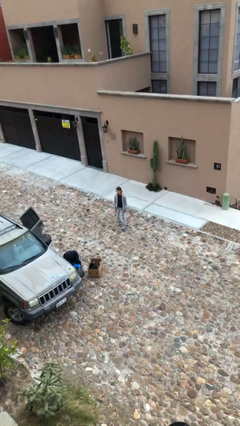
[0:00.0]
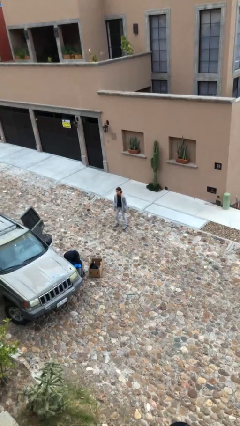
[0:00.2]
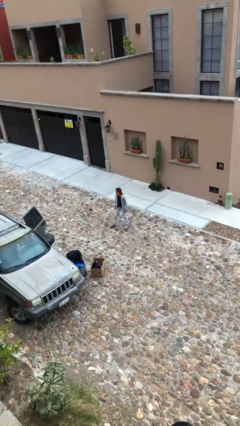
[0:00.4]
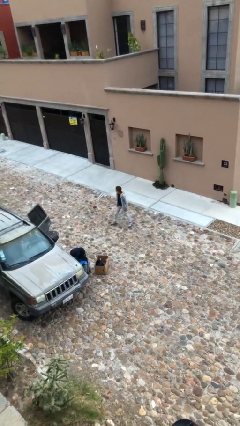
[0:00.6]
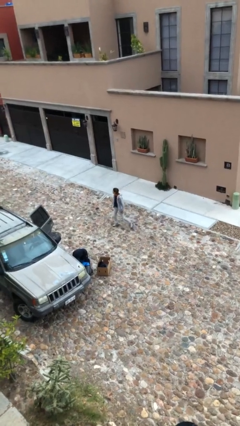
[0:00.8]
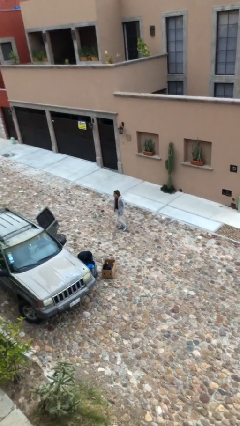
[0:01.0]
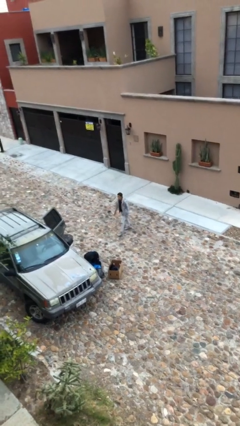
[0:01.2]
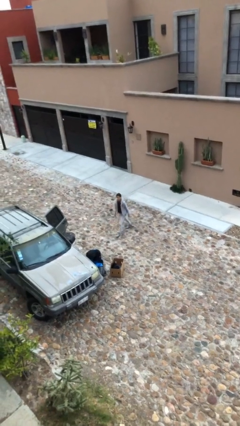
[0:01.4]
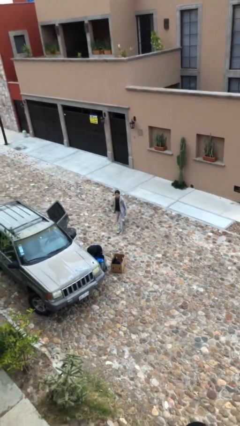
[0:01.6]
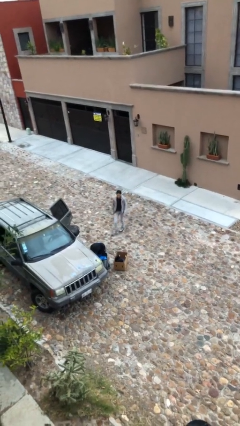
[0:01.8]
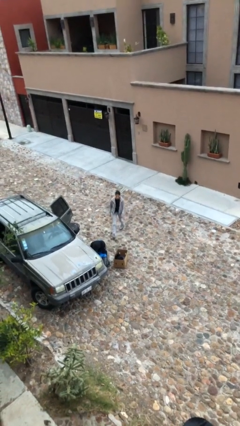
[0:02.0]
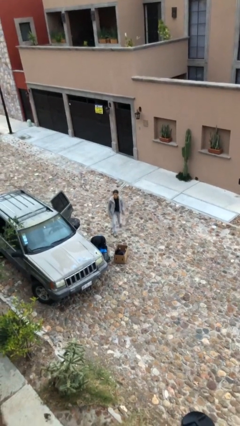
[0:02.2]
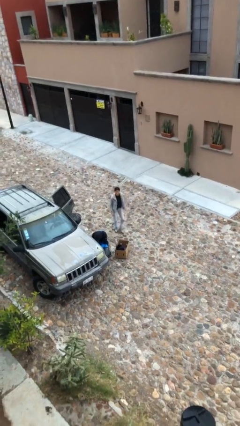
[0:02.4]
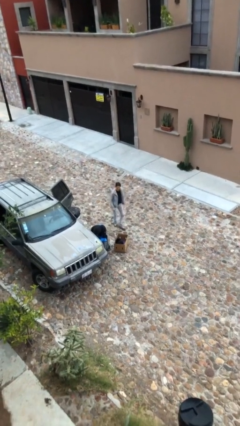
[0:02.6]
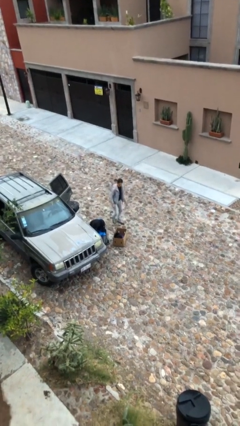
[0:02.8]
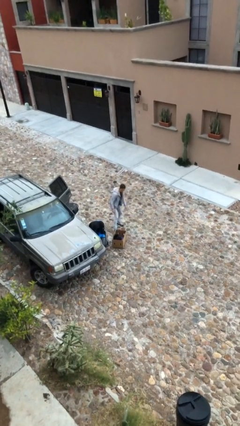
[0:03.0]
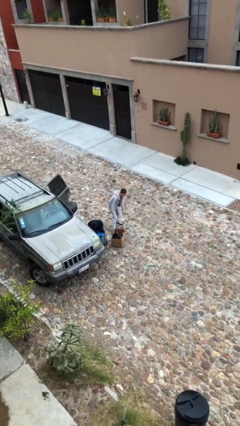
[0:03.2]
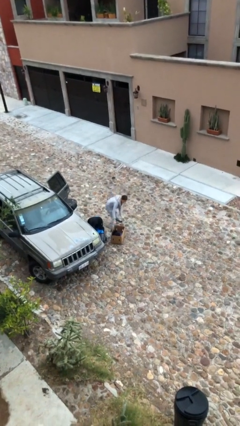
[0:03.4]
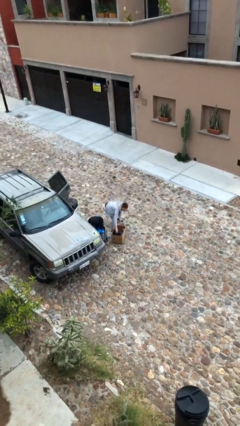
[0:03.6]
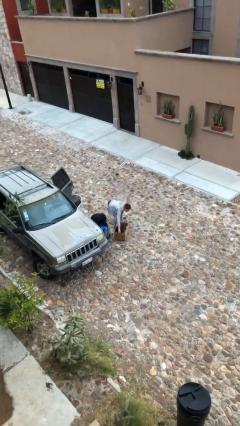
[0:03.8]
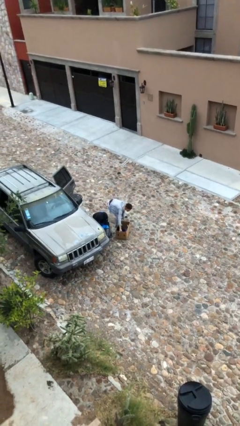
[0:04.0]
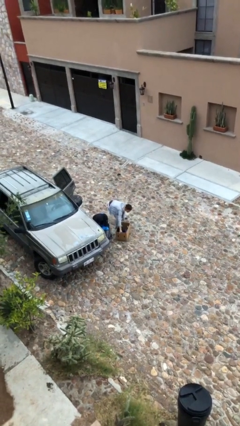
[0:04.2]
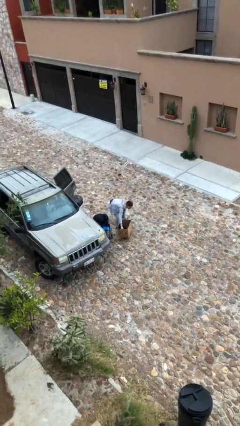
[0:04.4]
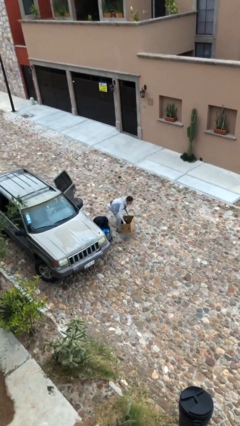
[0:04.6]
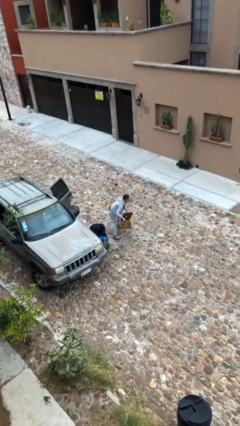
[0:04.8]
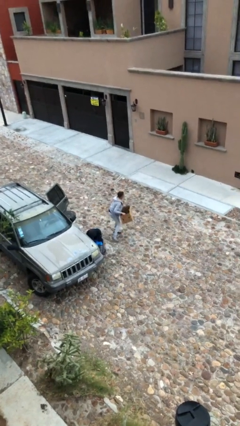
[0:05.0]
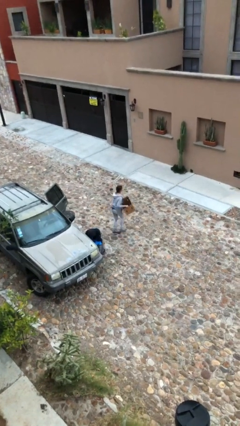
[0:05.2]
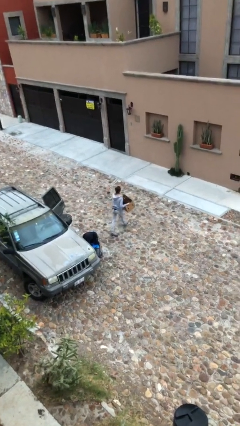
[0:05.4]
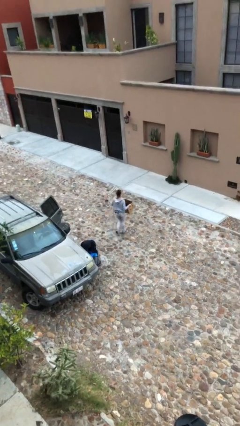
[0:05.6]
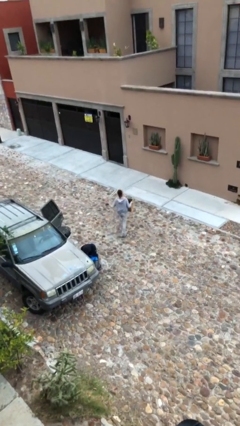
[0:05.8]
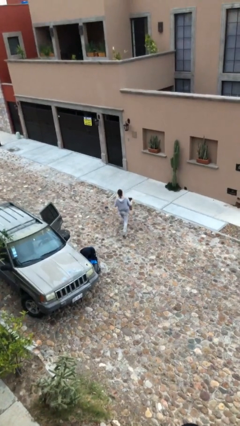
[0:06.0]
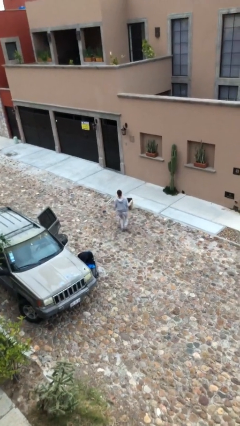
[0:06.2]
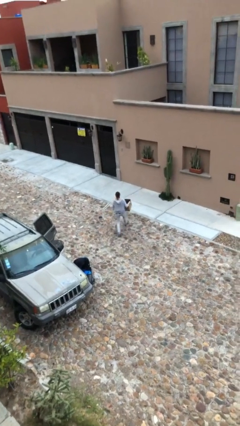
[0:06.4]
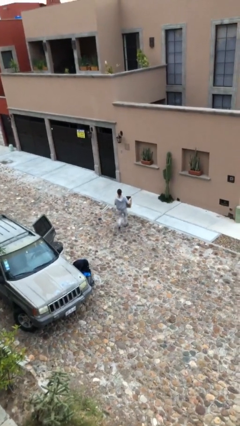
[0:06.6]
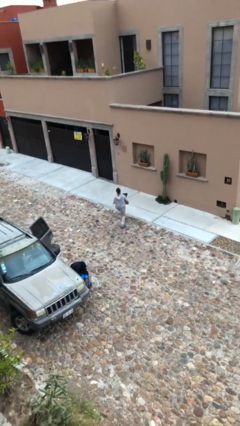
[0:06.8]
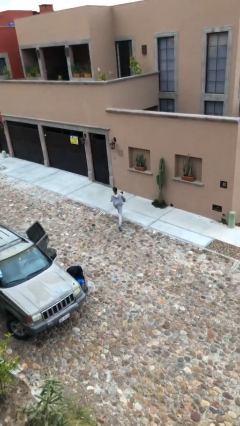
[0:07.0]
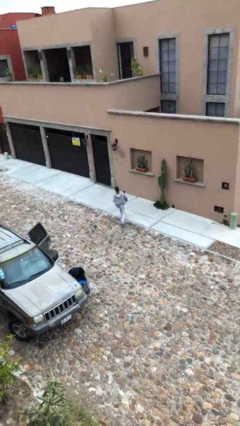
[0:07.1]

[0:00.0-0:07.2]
person steals object from person

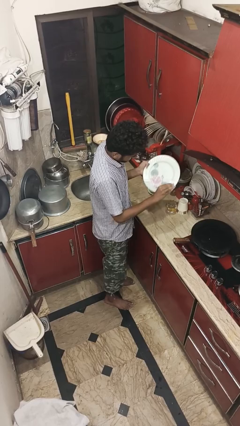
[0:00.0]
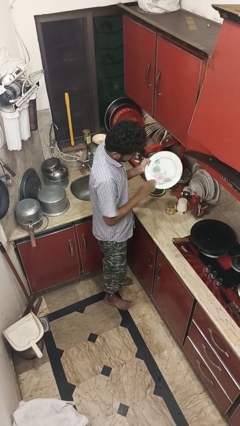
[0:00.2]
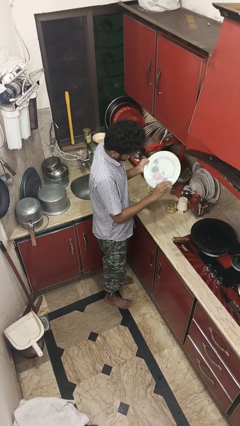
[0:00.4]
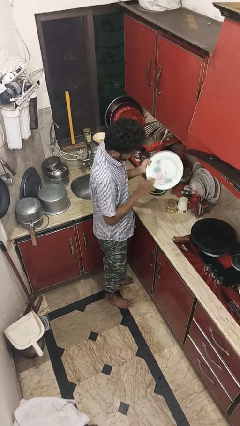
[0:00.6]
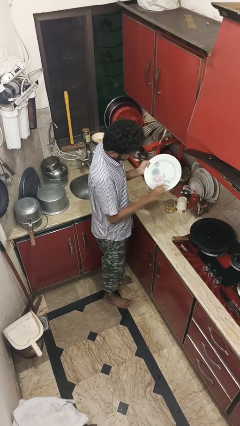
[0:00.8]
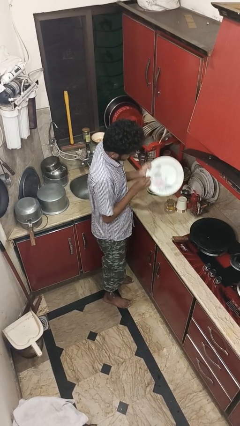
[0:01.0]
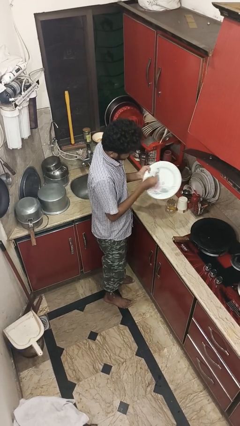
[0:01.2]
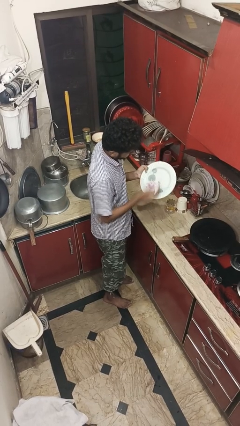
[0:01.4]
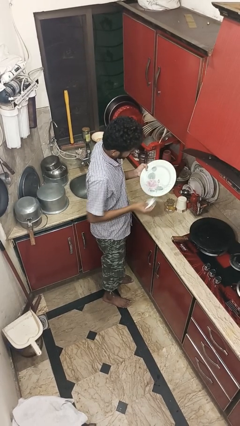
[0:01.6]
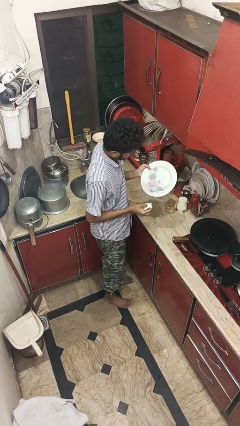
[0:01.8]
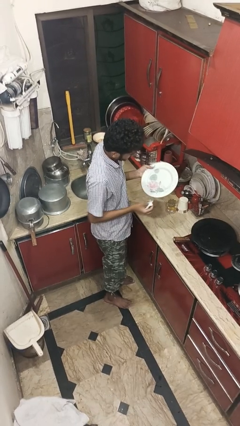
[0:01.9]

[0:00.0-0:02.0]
person dries dish

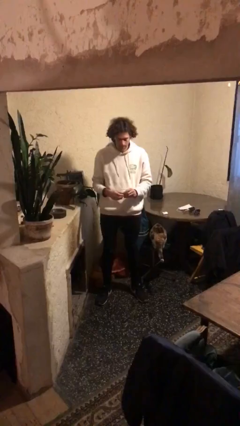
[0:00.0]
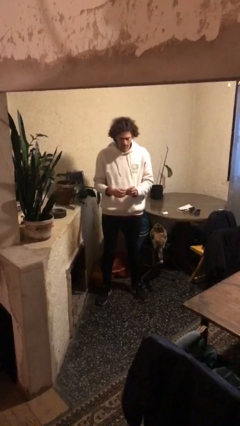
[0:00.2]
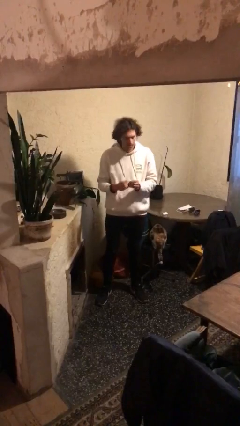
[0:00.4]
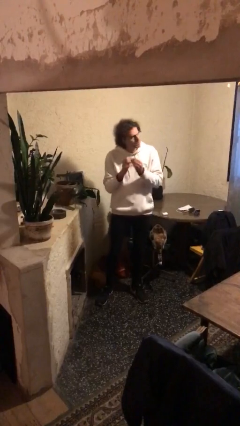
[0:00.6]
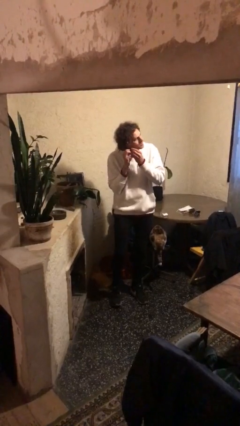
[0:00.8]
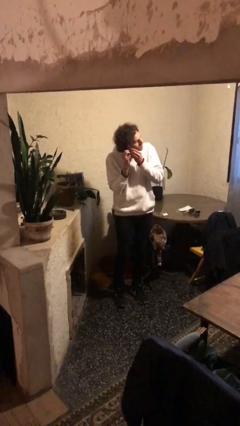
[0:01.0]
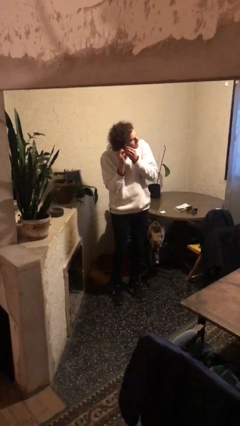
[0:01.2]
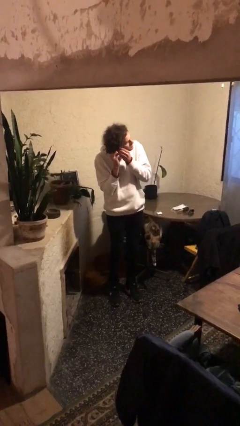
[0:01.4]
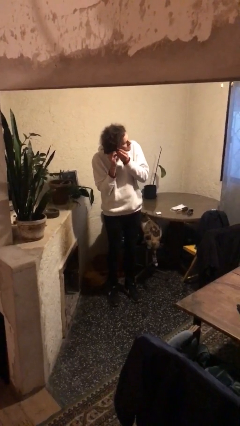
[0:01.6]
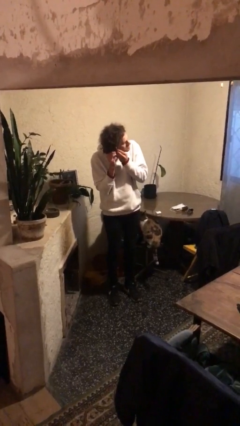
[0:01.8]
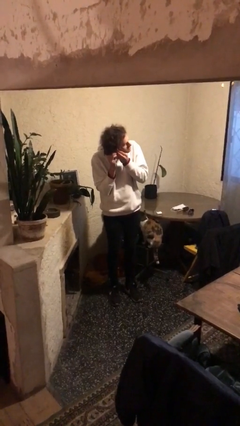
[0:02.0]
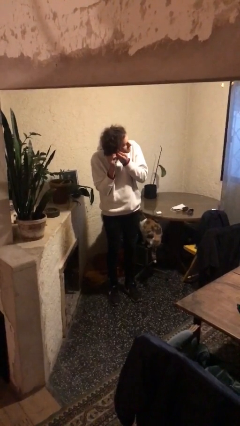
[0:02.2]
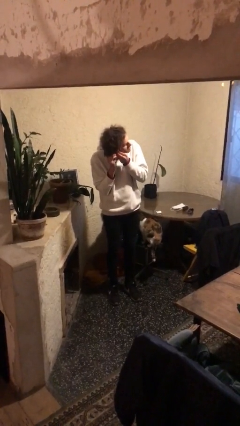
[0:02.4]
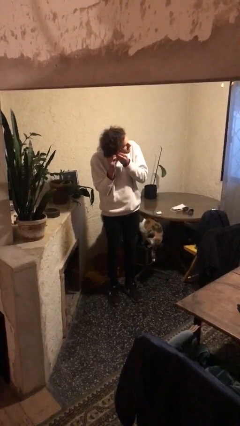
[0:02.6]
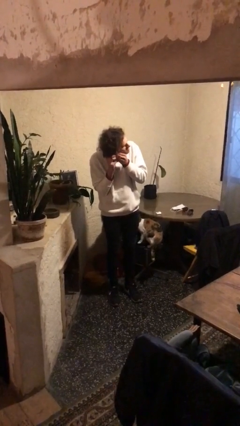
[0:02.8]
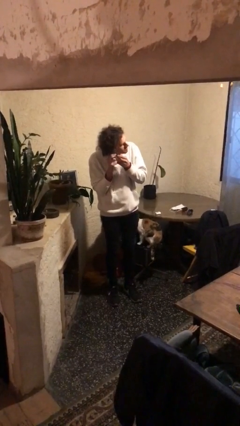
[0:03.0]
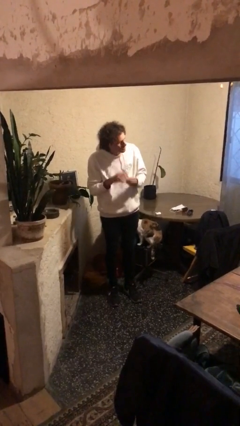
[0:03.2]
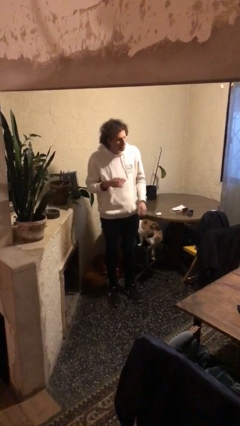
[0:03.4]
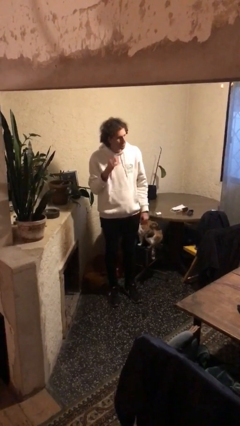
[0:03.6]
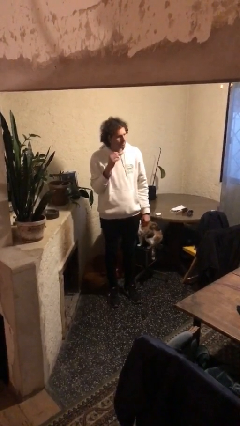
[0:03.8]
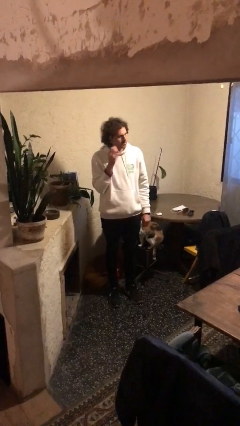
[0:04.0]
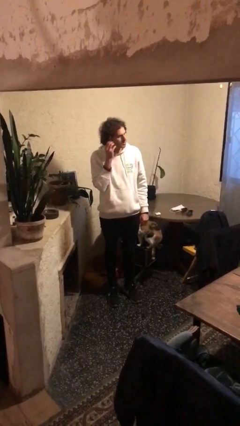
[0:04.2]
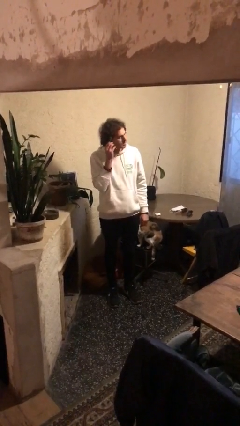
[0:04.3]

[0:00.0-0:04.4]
person puts on earrings

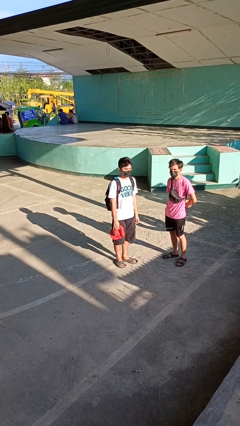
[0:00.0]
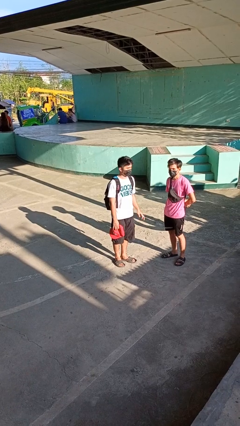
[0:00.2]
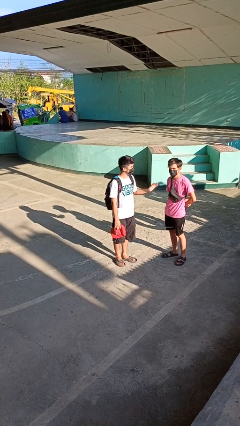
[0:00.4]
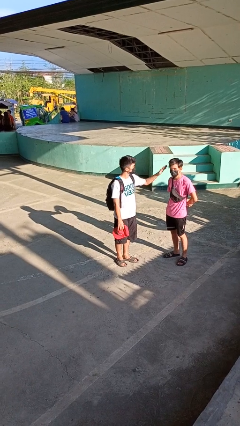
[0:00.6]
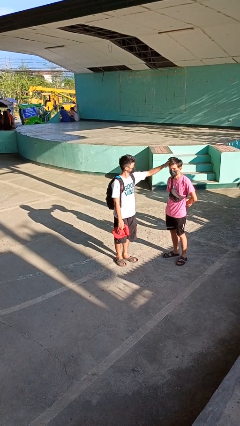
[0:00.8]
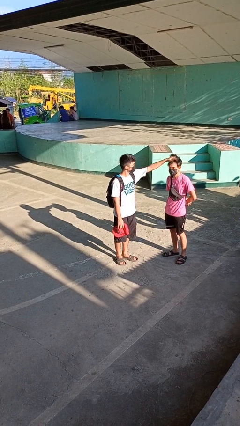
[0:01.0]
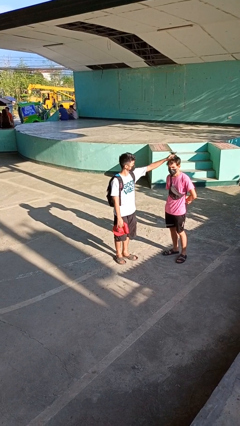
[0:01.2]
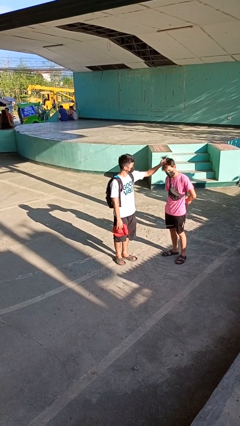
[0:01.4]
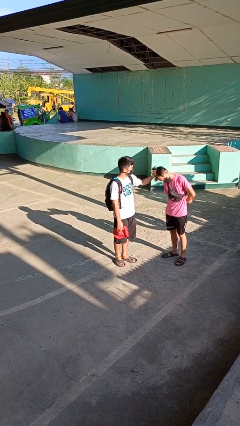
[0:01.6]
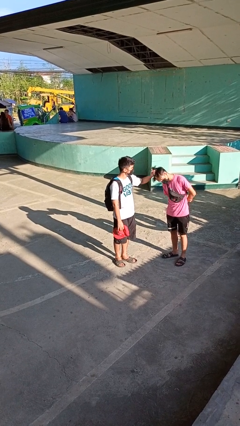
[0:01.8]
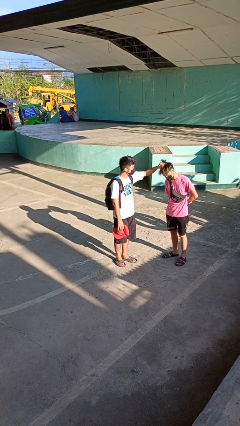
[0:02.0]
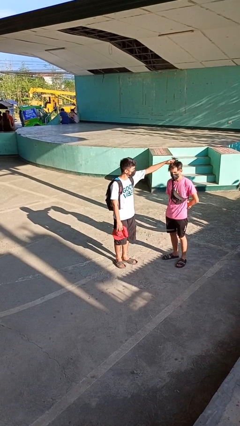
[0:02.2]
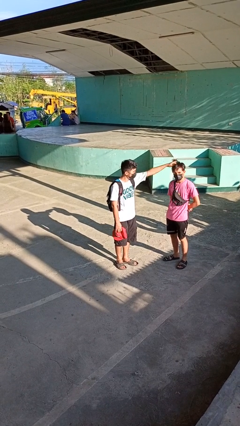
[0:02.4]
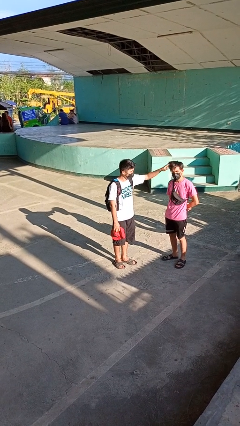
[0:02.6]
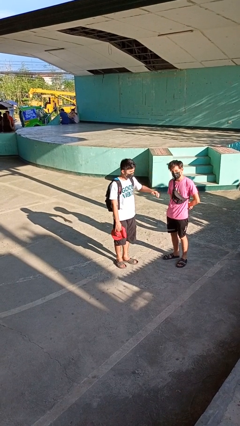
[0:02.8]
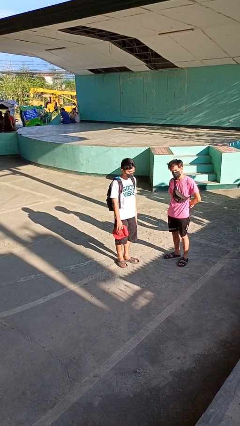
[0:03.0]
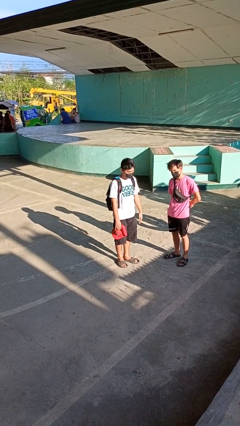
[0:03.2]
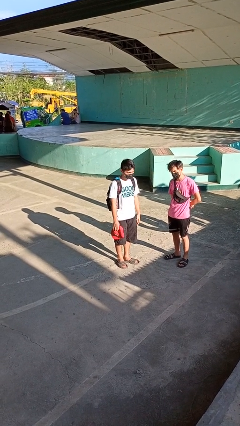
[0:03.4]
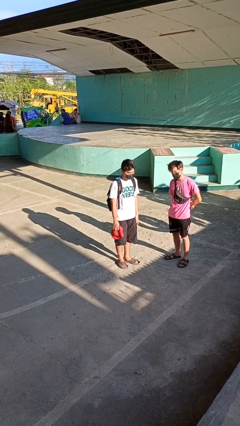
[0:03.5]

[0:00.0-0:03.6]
person grabs person by hair

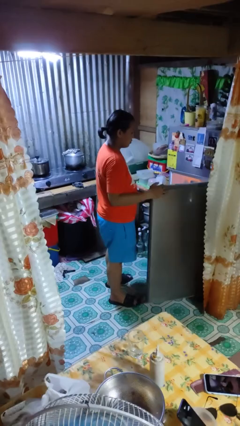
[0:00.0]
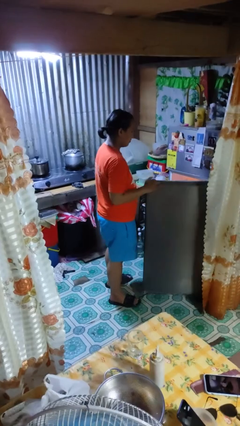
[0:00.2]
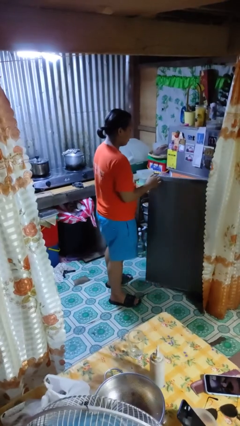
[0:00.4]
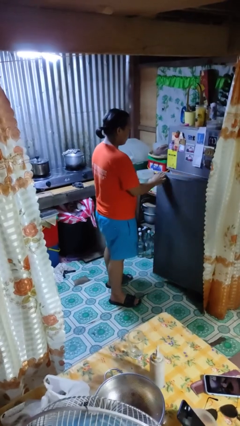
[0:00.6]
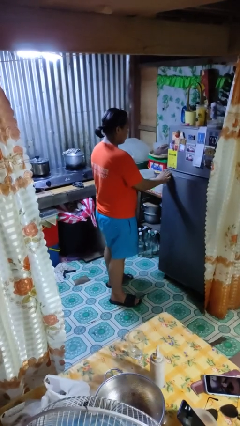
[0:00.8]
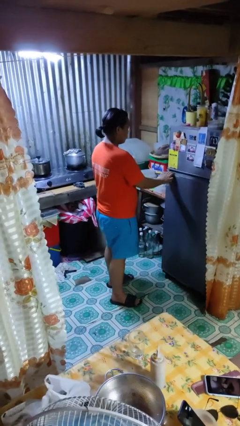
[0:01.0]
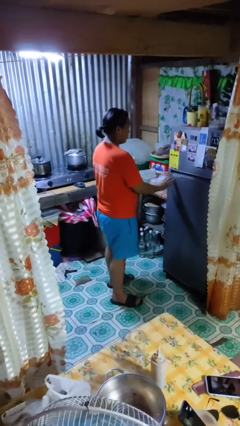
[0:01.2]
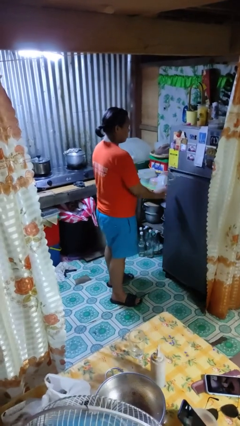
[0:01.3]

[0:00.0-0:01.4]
person closes refrigerator
